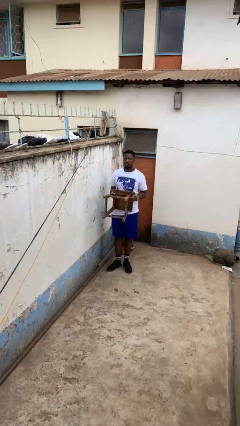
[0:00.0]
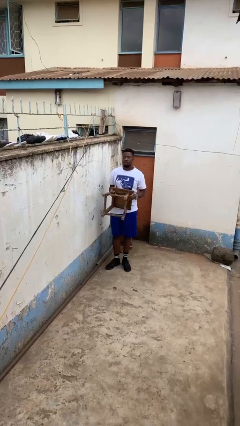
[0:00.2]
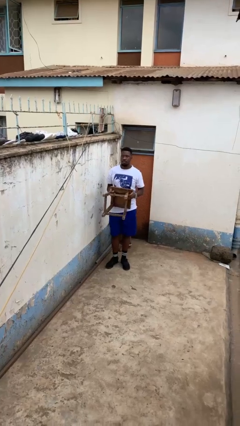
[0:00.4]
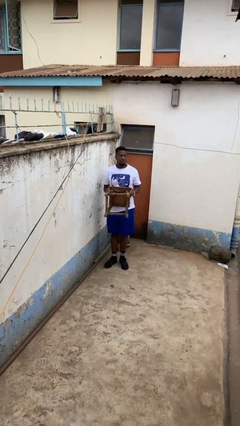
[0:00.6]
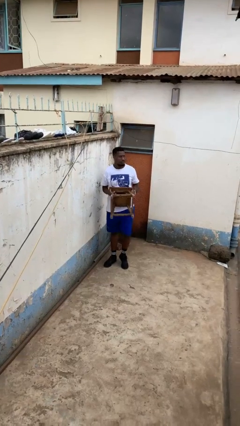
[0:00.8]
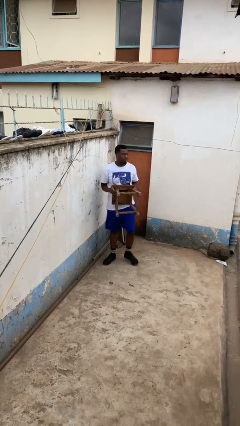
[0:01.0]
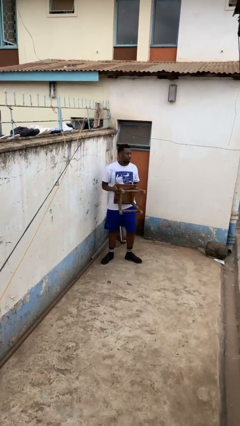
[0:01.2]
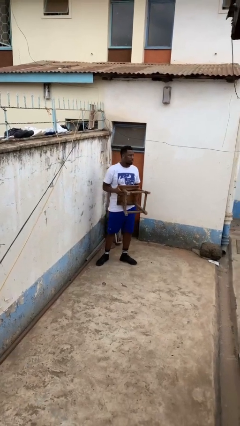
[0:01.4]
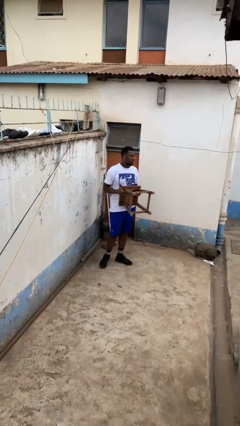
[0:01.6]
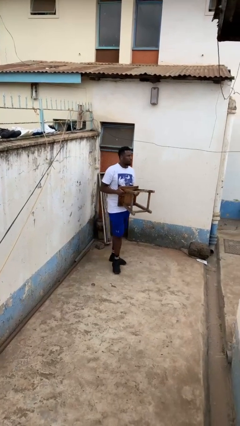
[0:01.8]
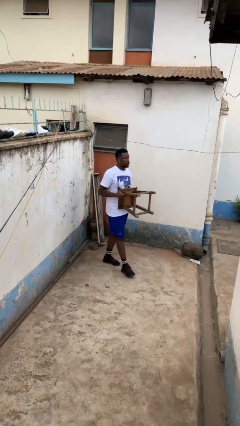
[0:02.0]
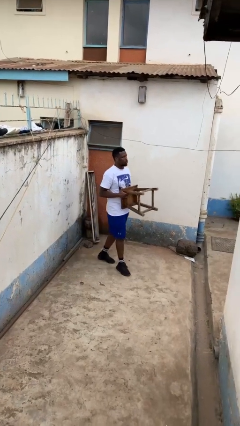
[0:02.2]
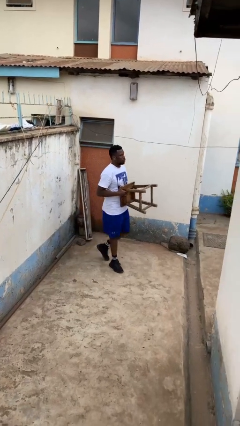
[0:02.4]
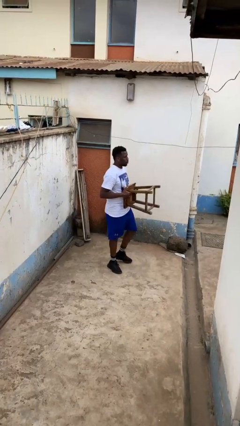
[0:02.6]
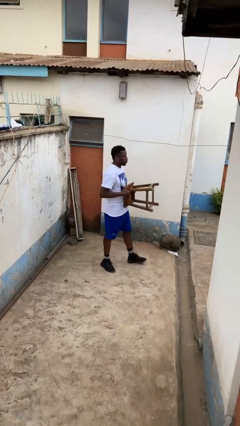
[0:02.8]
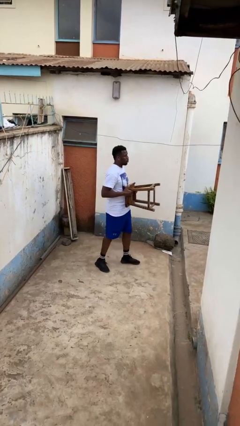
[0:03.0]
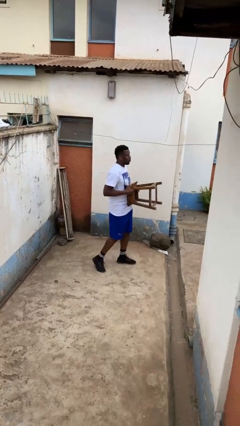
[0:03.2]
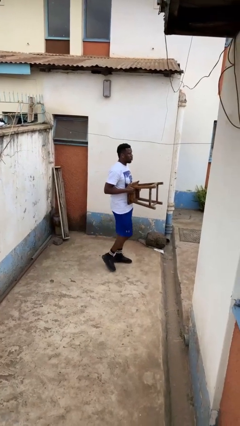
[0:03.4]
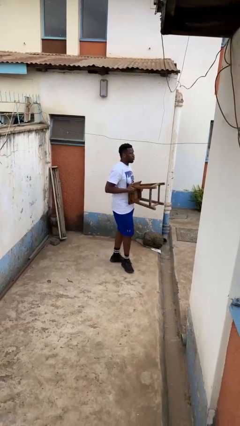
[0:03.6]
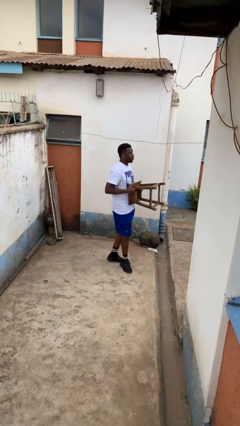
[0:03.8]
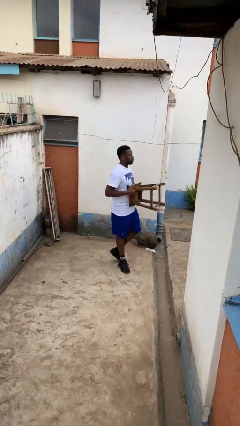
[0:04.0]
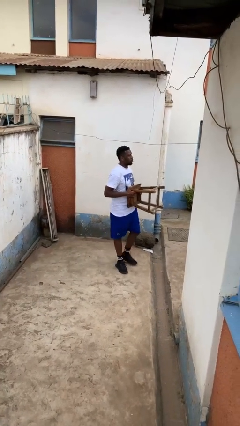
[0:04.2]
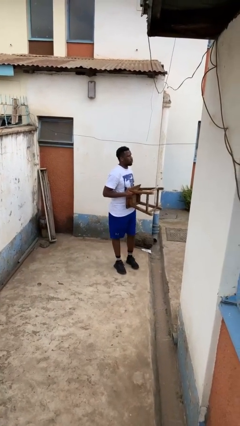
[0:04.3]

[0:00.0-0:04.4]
person carries furniture

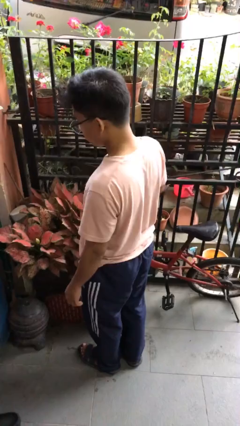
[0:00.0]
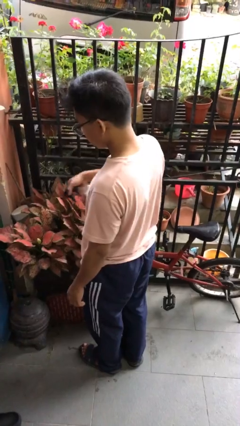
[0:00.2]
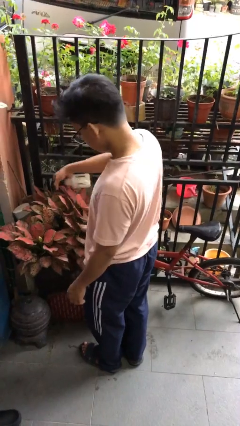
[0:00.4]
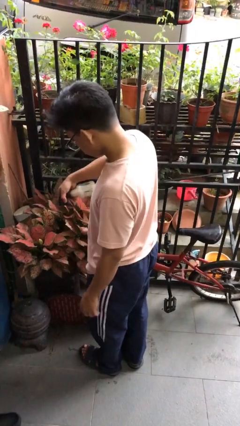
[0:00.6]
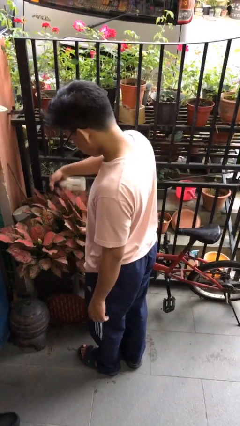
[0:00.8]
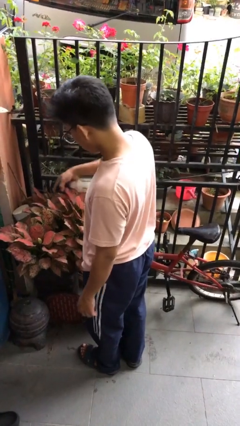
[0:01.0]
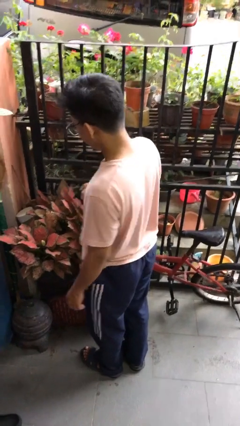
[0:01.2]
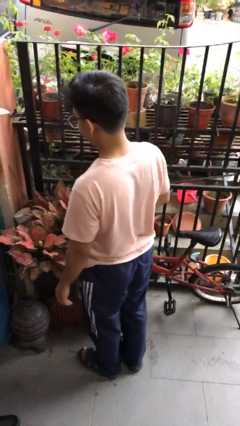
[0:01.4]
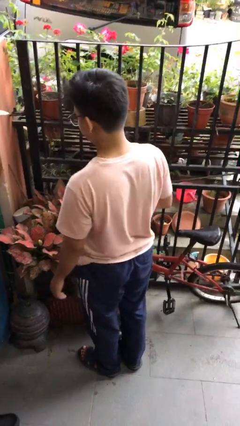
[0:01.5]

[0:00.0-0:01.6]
person waters houseplant

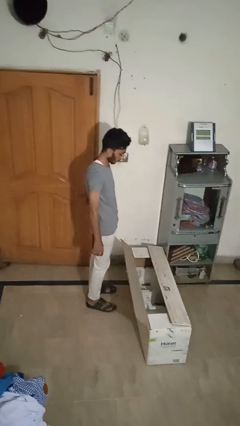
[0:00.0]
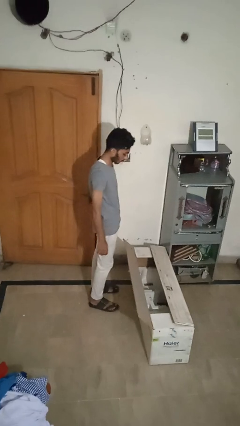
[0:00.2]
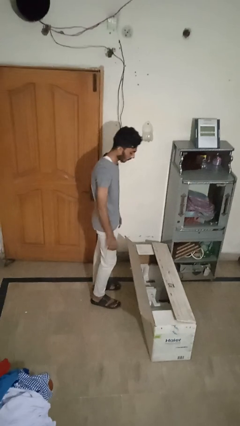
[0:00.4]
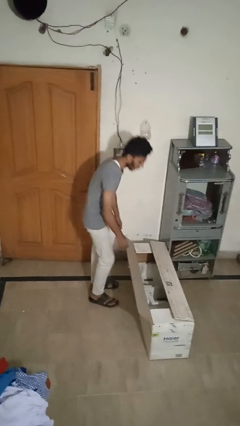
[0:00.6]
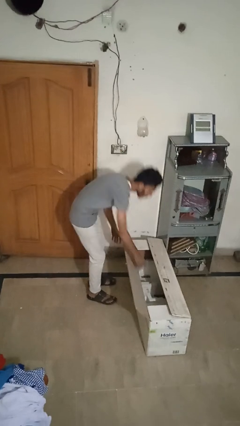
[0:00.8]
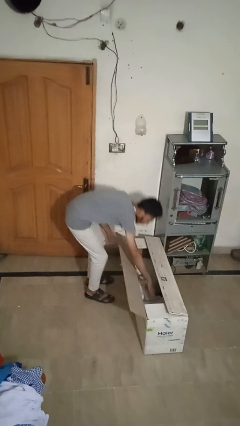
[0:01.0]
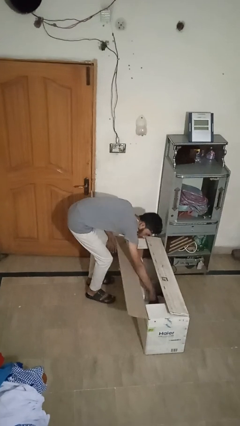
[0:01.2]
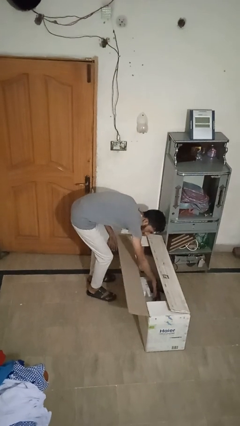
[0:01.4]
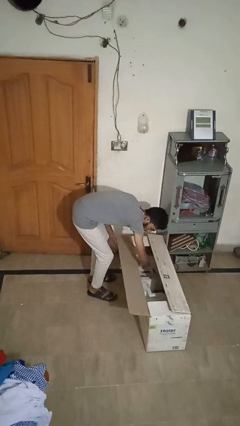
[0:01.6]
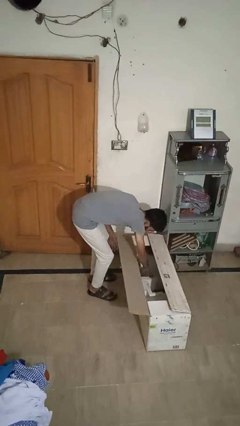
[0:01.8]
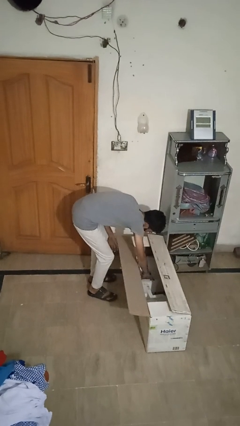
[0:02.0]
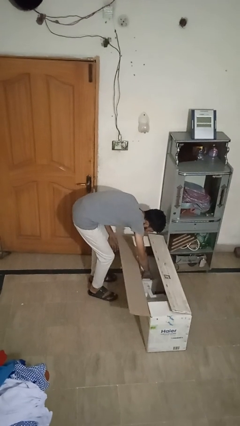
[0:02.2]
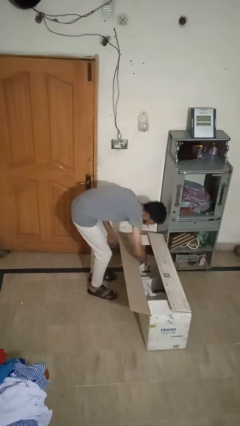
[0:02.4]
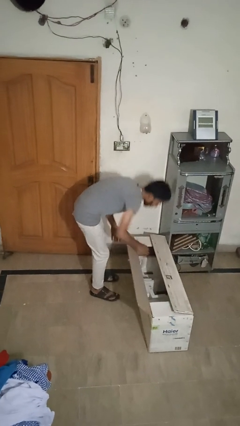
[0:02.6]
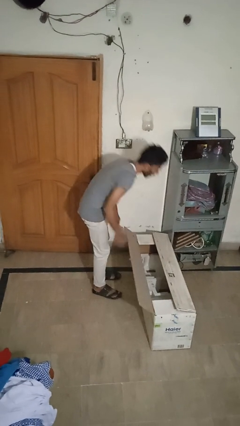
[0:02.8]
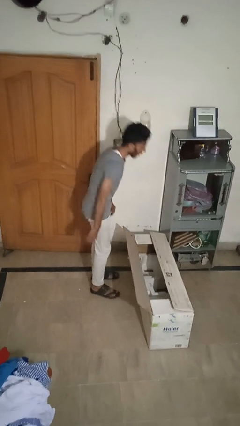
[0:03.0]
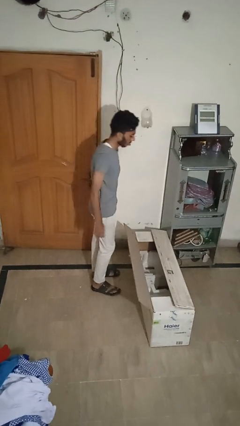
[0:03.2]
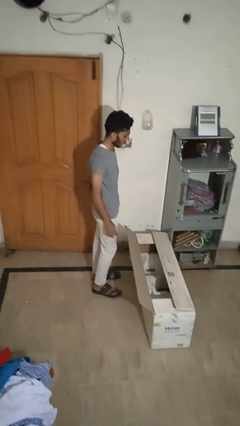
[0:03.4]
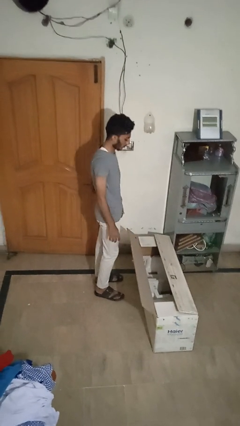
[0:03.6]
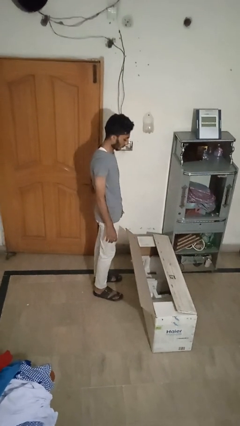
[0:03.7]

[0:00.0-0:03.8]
person searches in box

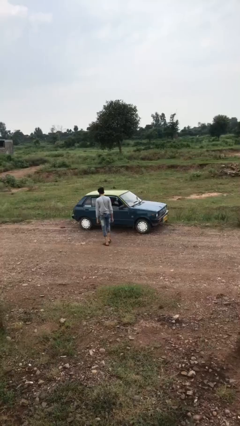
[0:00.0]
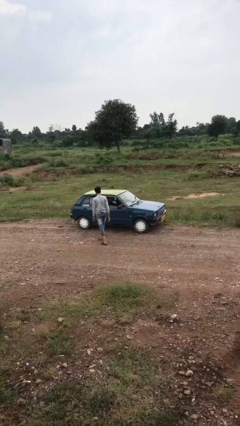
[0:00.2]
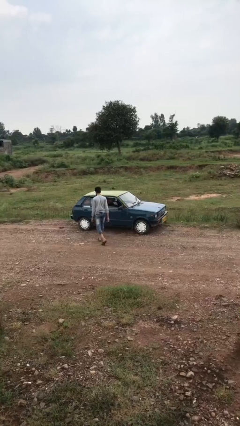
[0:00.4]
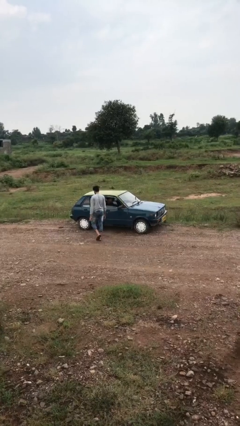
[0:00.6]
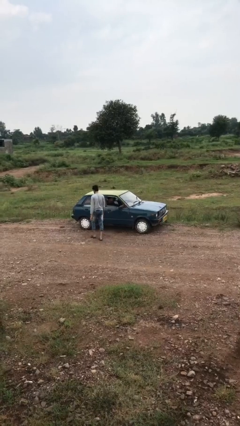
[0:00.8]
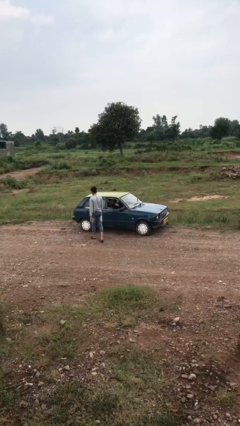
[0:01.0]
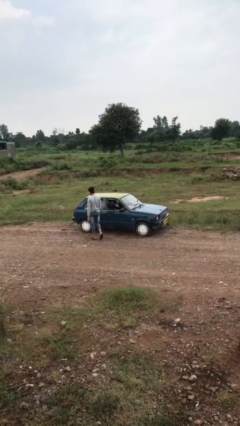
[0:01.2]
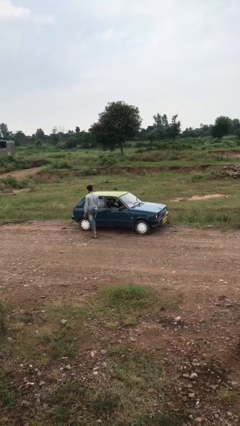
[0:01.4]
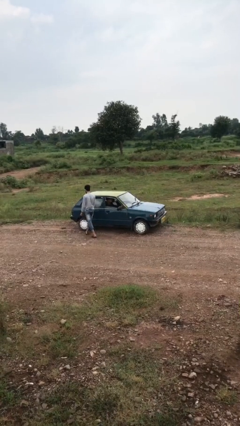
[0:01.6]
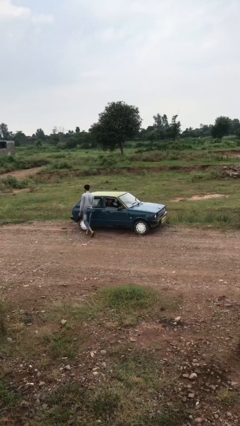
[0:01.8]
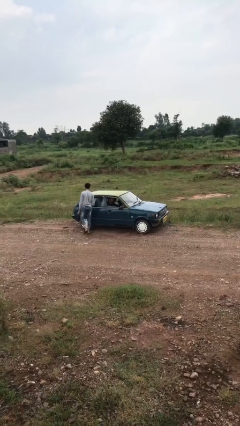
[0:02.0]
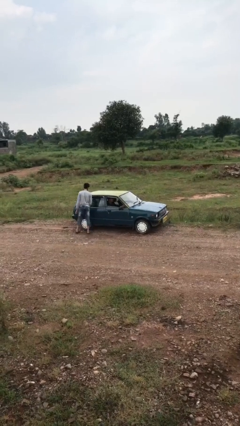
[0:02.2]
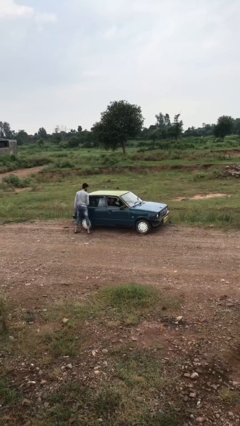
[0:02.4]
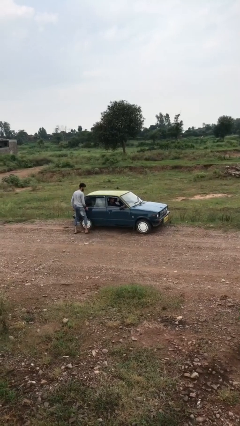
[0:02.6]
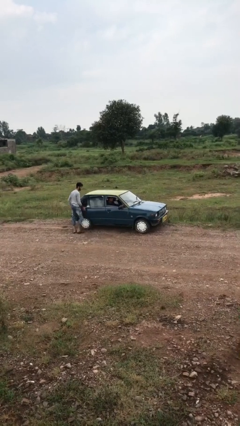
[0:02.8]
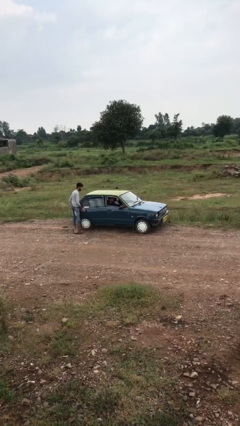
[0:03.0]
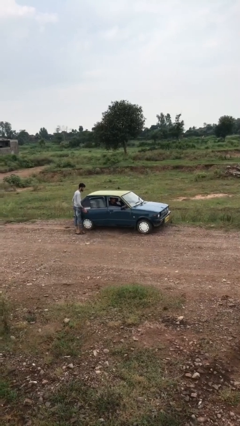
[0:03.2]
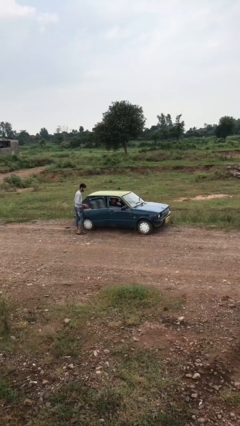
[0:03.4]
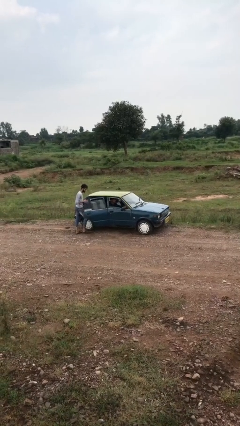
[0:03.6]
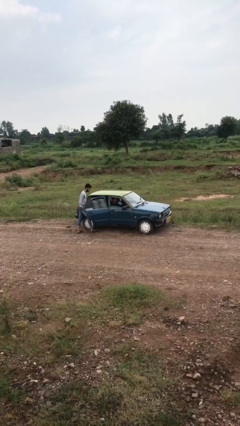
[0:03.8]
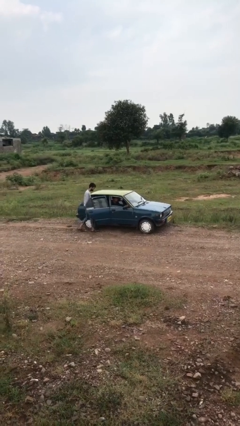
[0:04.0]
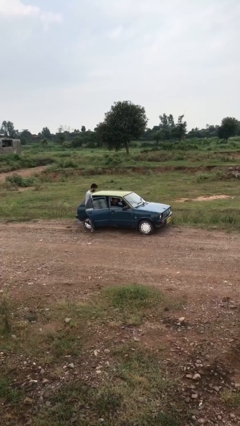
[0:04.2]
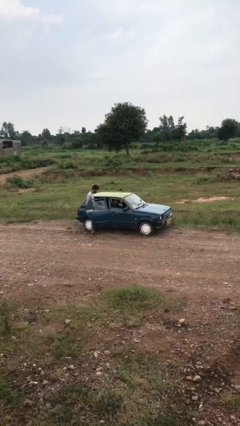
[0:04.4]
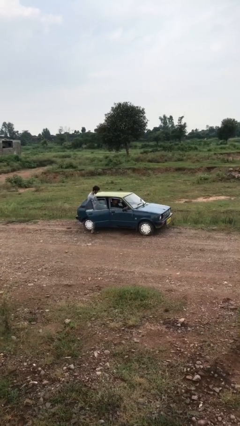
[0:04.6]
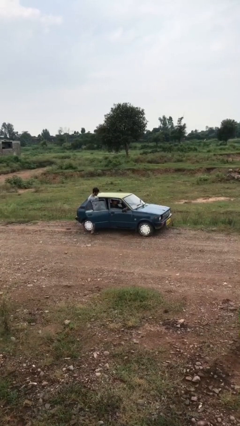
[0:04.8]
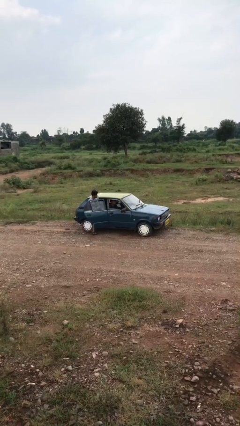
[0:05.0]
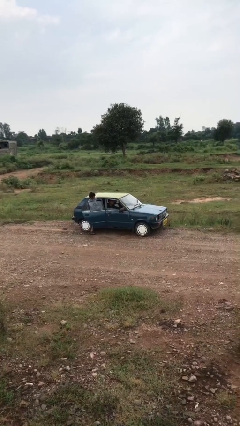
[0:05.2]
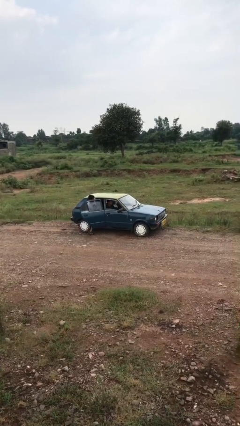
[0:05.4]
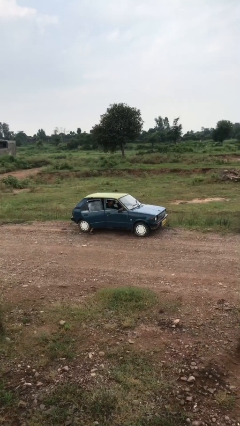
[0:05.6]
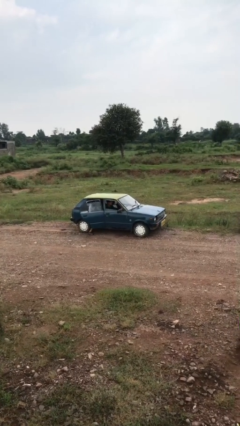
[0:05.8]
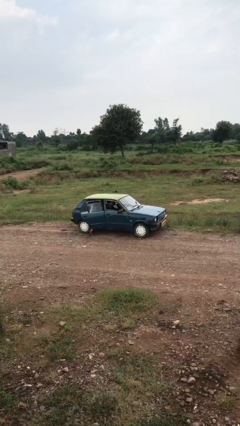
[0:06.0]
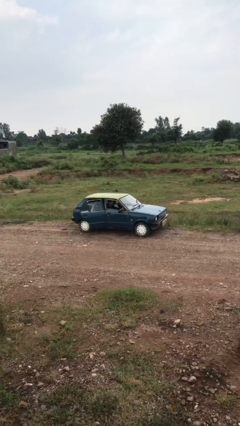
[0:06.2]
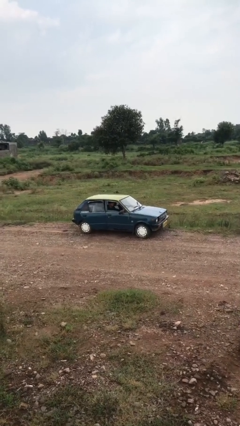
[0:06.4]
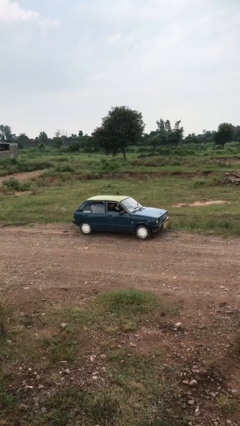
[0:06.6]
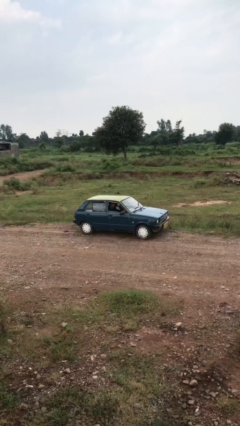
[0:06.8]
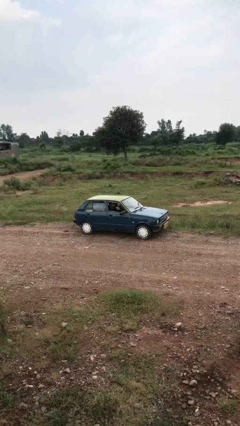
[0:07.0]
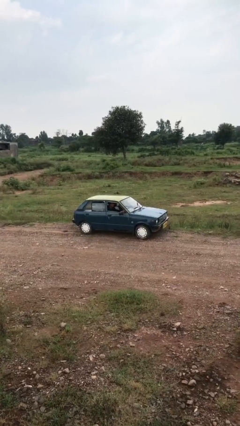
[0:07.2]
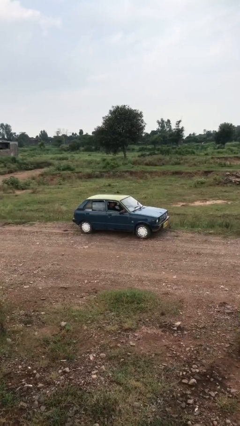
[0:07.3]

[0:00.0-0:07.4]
car picks up person

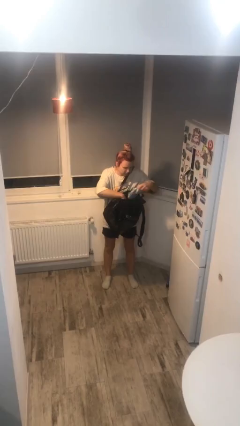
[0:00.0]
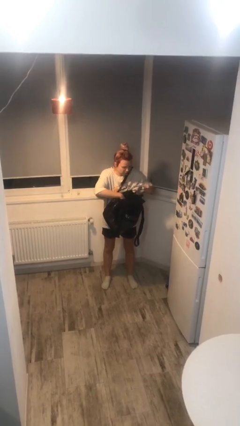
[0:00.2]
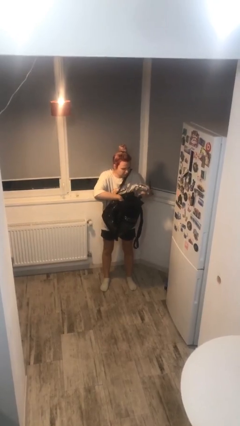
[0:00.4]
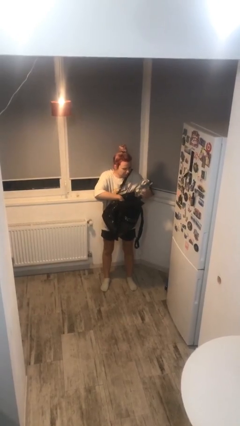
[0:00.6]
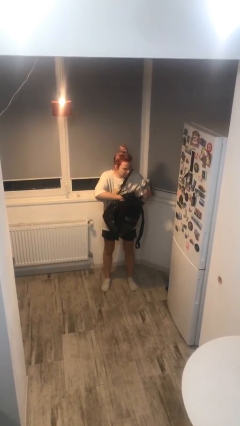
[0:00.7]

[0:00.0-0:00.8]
person takes object from backpack
